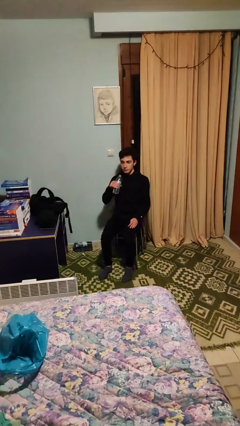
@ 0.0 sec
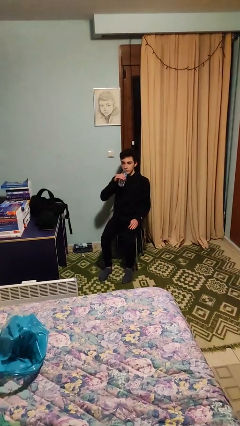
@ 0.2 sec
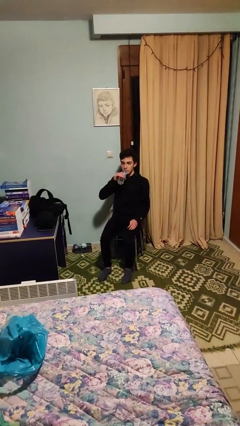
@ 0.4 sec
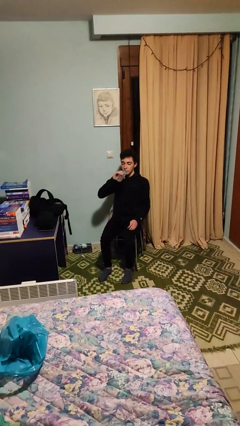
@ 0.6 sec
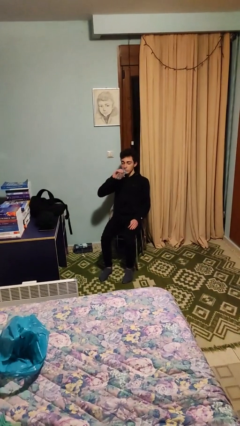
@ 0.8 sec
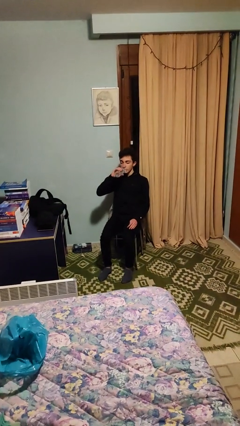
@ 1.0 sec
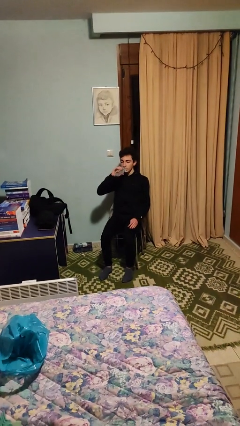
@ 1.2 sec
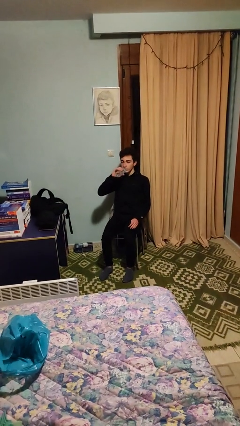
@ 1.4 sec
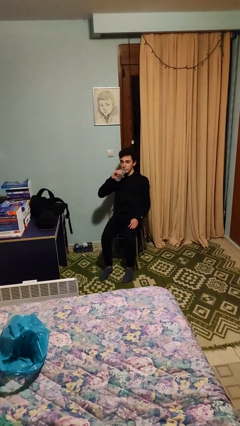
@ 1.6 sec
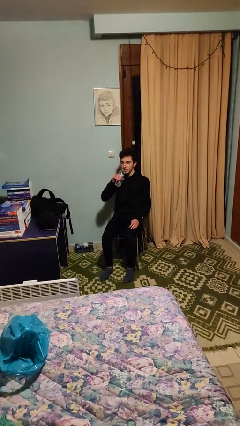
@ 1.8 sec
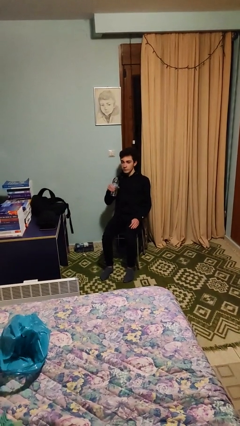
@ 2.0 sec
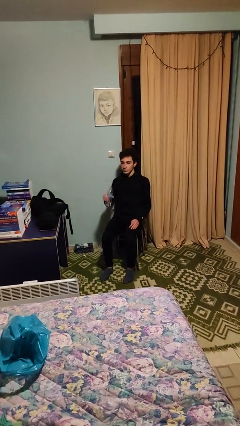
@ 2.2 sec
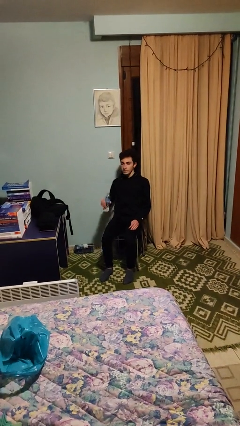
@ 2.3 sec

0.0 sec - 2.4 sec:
person drinks from bottle

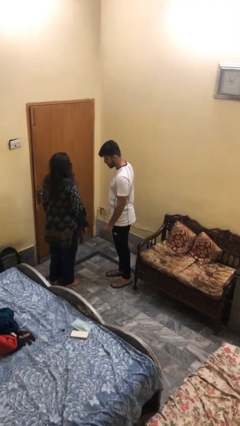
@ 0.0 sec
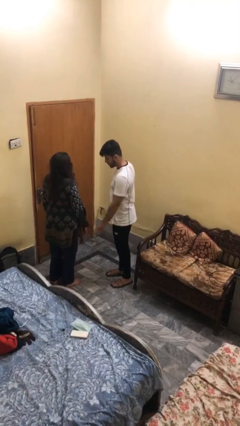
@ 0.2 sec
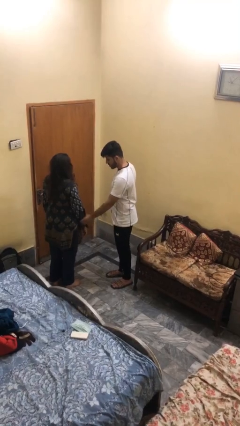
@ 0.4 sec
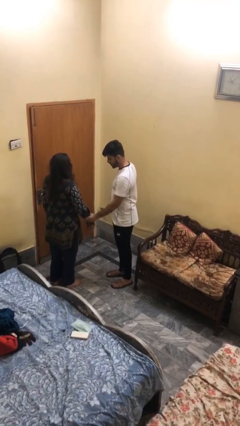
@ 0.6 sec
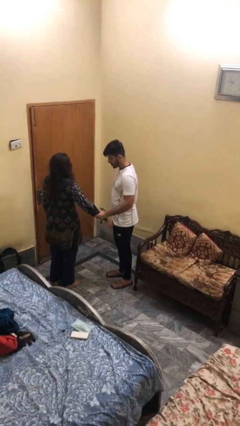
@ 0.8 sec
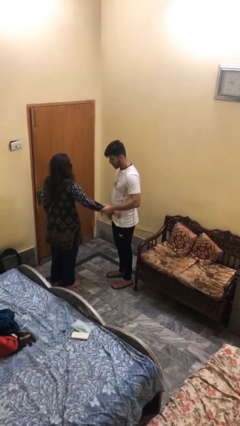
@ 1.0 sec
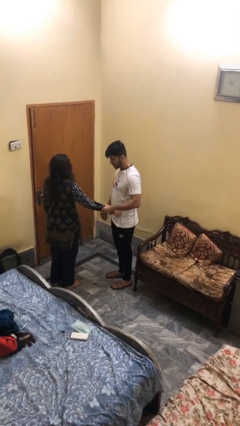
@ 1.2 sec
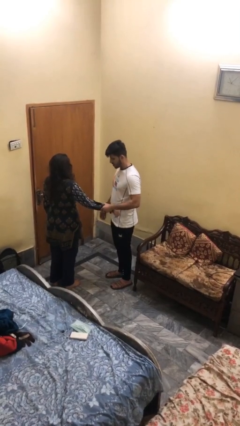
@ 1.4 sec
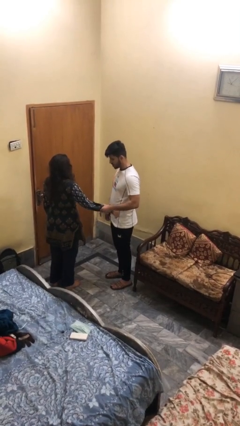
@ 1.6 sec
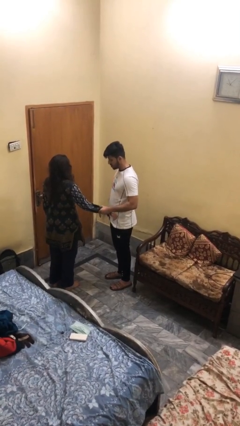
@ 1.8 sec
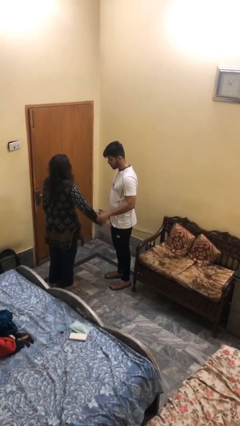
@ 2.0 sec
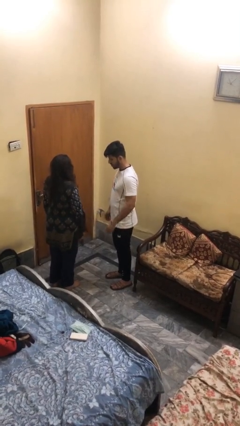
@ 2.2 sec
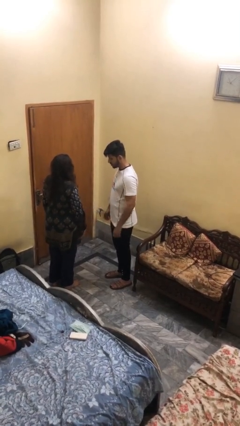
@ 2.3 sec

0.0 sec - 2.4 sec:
person grabs person by forearm

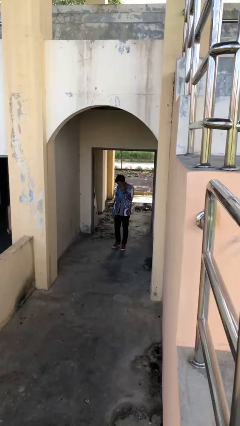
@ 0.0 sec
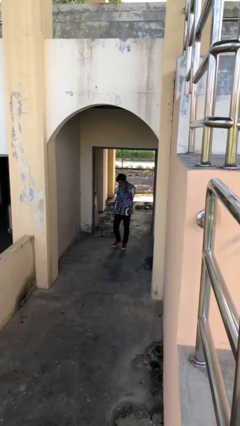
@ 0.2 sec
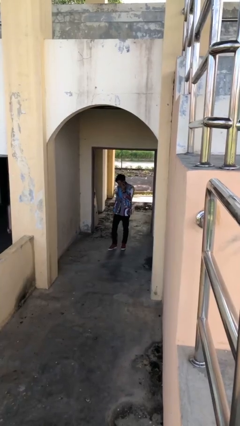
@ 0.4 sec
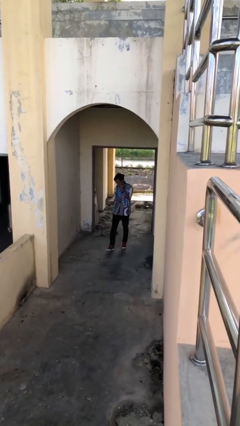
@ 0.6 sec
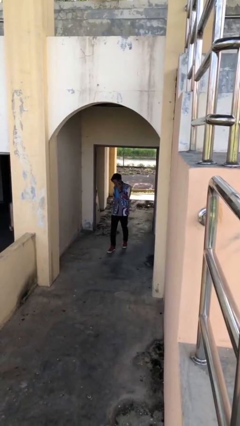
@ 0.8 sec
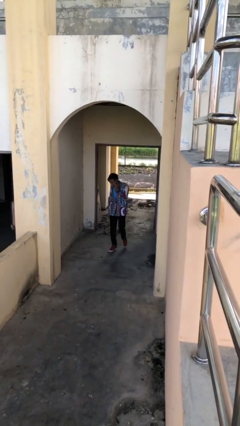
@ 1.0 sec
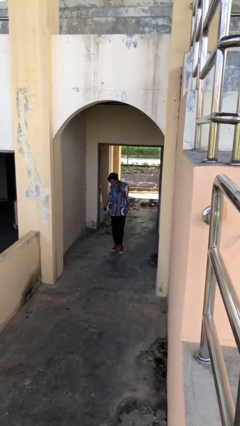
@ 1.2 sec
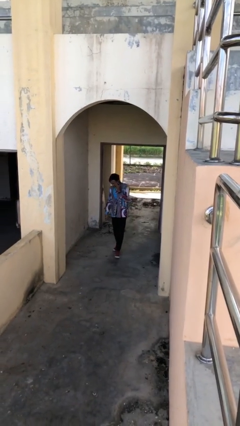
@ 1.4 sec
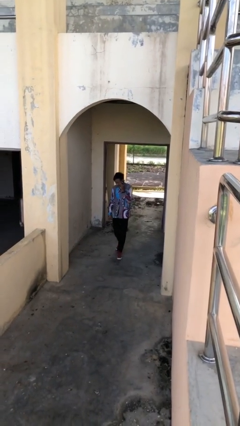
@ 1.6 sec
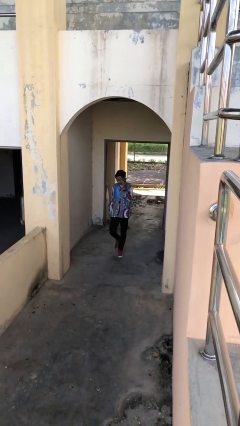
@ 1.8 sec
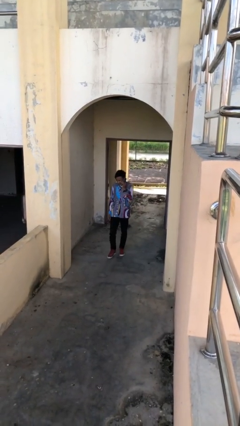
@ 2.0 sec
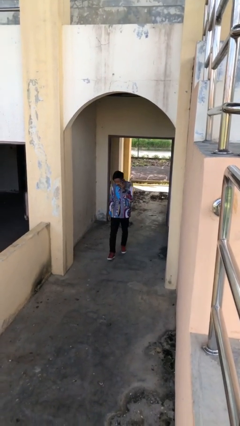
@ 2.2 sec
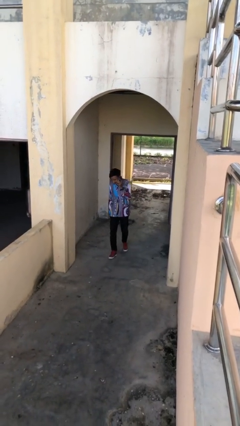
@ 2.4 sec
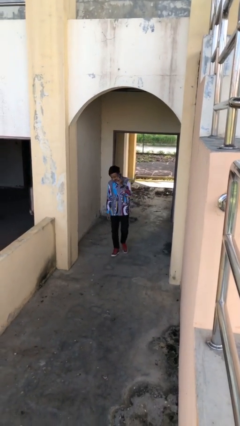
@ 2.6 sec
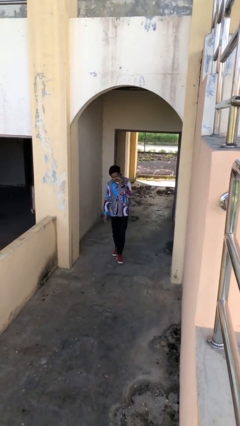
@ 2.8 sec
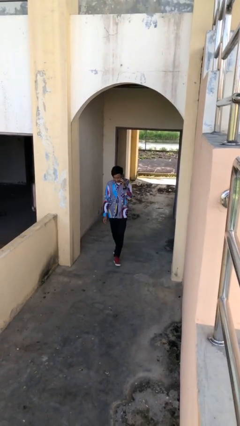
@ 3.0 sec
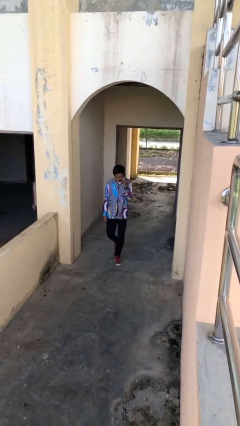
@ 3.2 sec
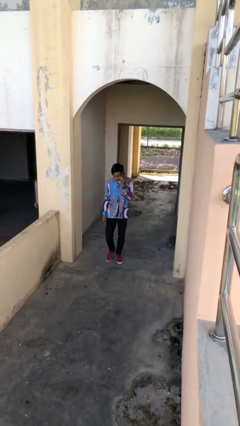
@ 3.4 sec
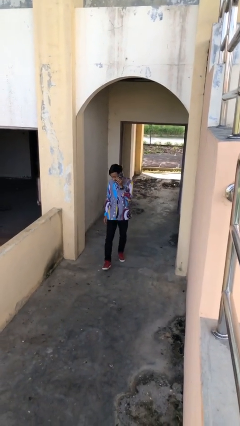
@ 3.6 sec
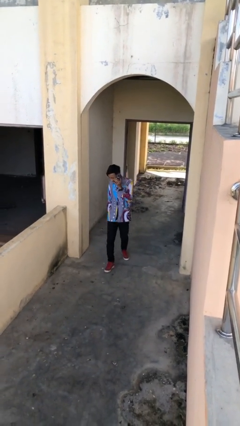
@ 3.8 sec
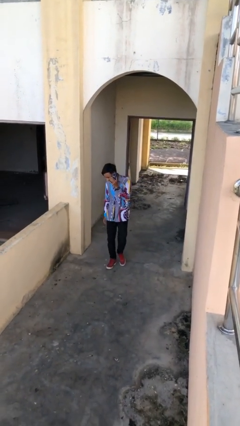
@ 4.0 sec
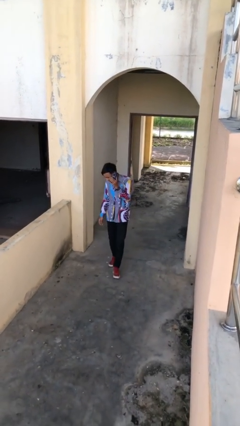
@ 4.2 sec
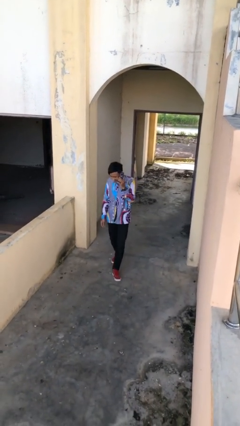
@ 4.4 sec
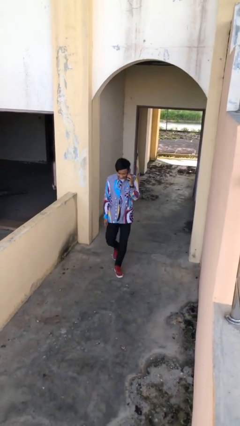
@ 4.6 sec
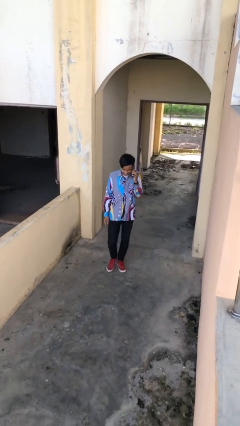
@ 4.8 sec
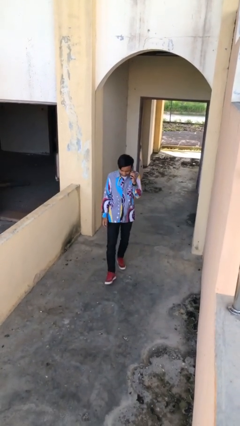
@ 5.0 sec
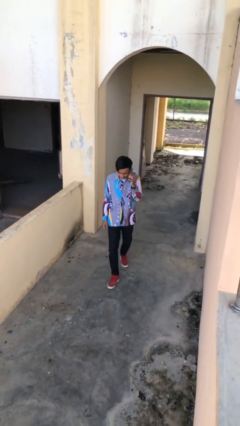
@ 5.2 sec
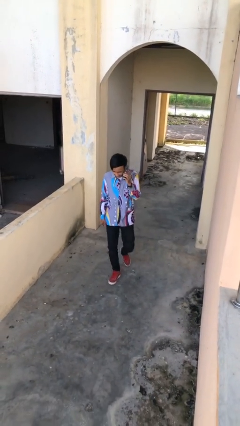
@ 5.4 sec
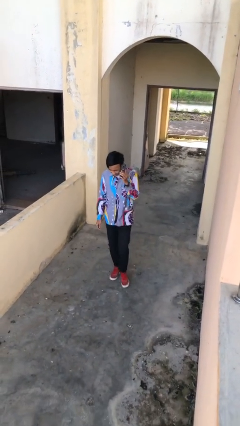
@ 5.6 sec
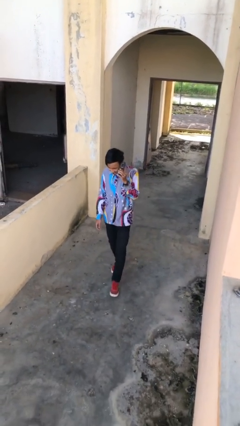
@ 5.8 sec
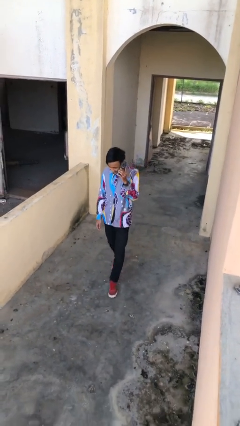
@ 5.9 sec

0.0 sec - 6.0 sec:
person enters scene through structure

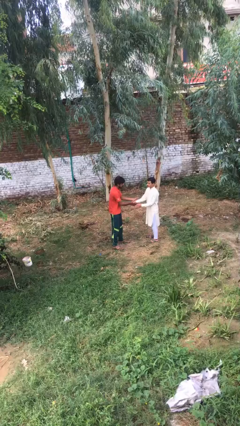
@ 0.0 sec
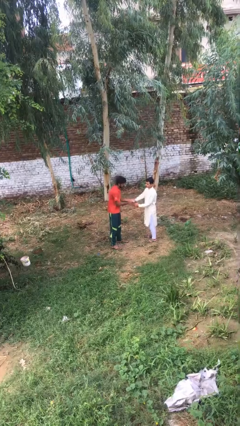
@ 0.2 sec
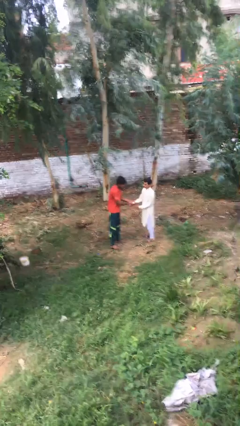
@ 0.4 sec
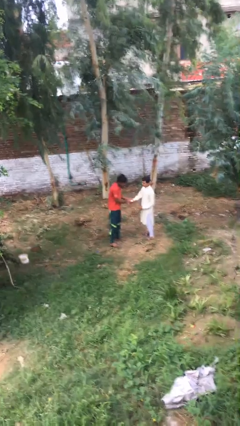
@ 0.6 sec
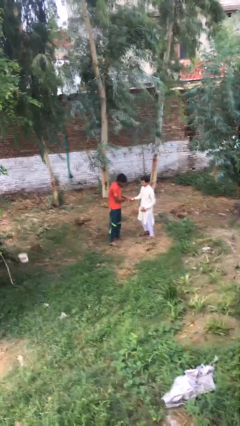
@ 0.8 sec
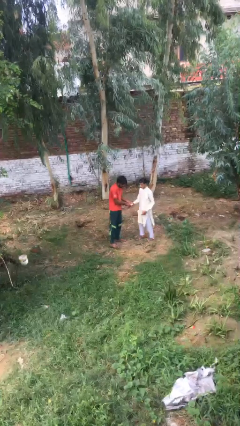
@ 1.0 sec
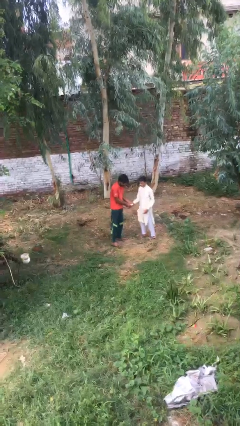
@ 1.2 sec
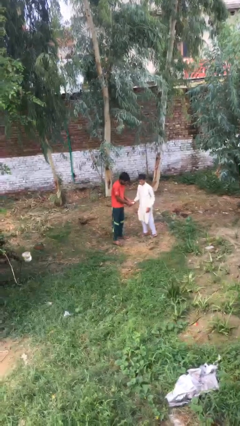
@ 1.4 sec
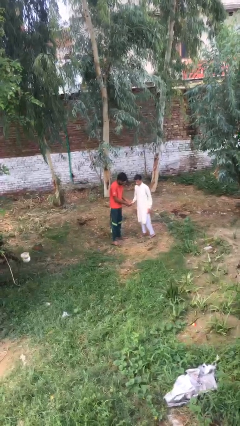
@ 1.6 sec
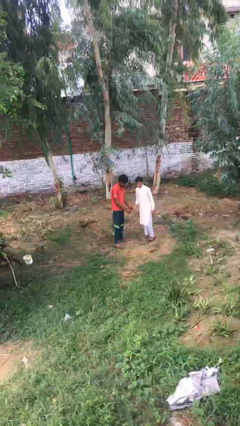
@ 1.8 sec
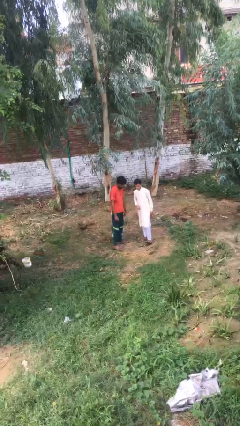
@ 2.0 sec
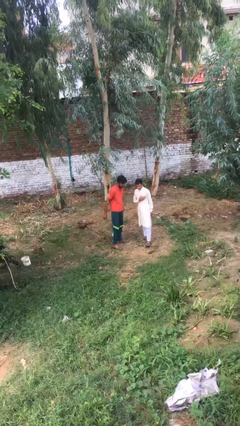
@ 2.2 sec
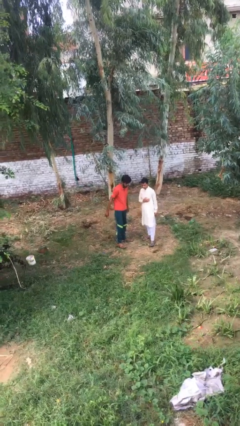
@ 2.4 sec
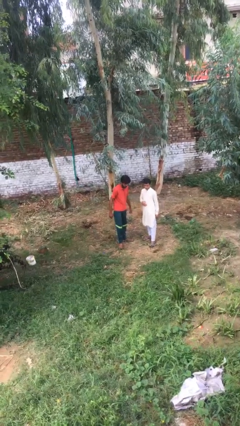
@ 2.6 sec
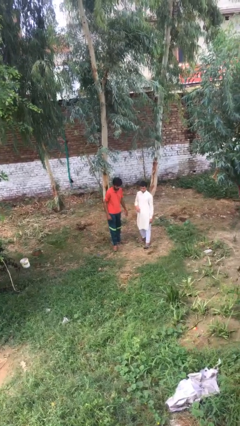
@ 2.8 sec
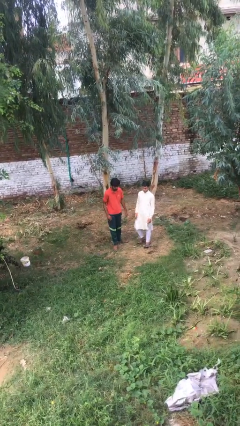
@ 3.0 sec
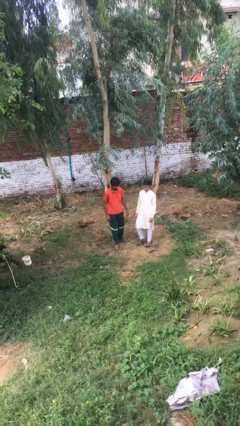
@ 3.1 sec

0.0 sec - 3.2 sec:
person shakes hand

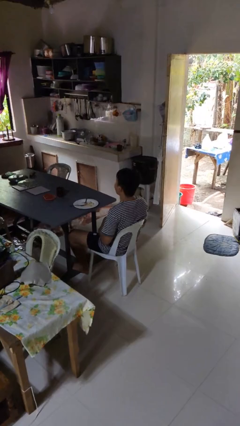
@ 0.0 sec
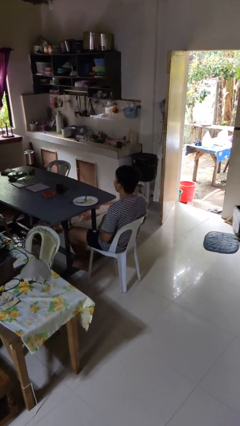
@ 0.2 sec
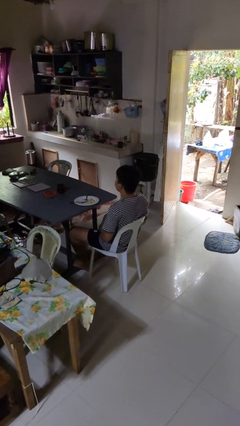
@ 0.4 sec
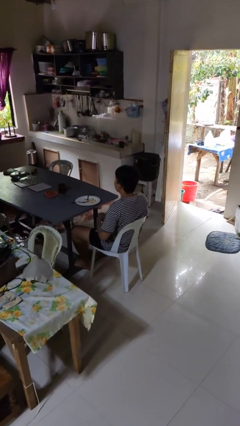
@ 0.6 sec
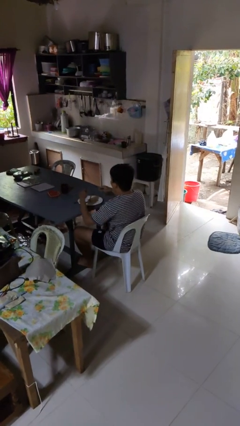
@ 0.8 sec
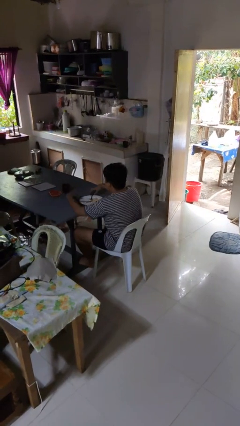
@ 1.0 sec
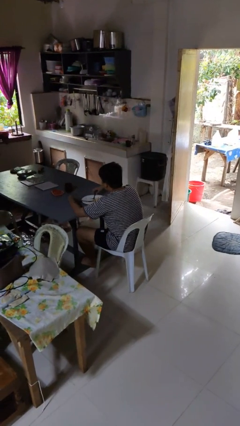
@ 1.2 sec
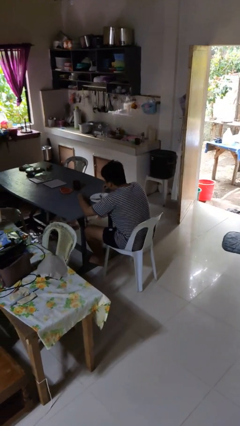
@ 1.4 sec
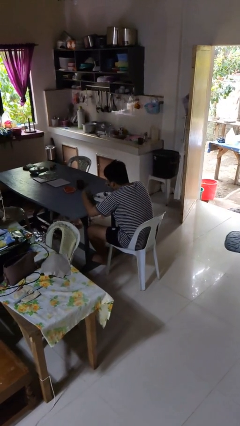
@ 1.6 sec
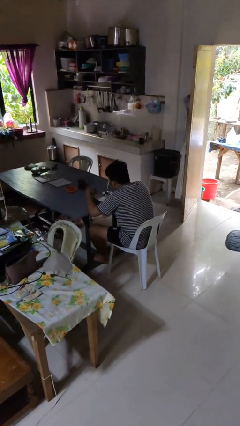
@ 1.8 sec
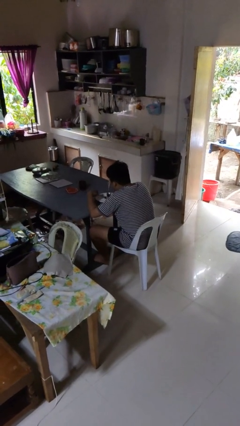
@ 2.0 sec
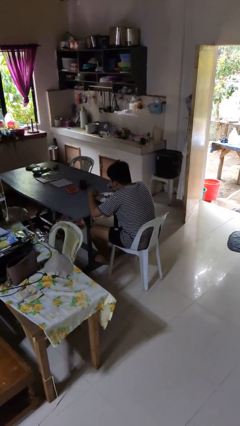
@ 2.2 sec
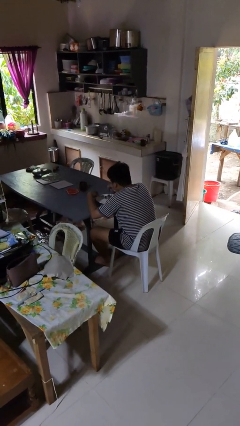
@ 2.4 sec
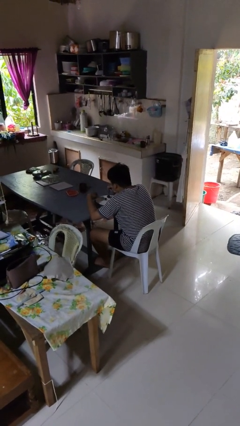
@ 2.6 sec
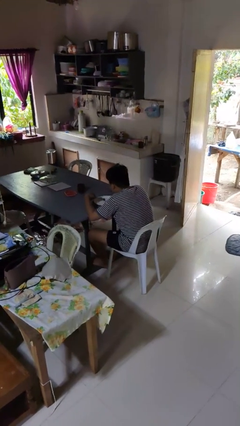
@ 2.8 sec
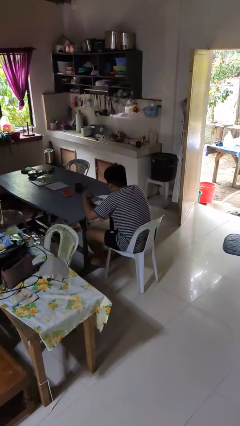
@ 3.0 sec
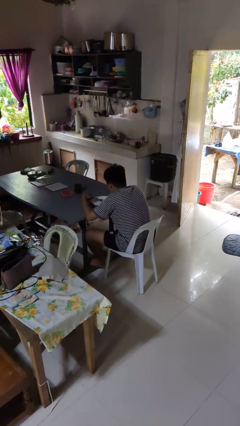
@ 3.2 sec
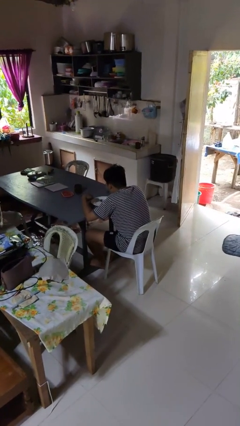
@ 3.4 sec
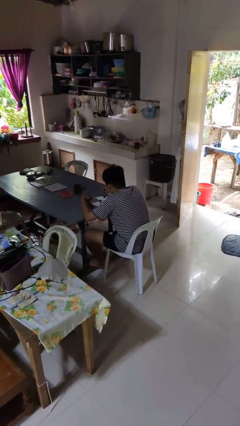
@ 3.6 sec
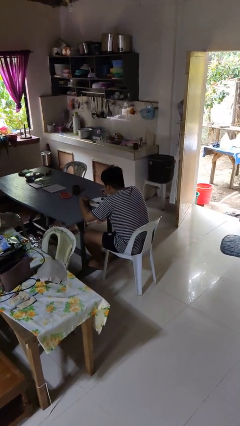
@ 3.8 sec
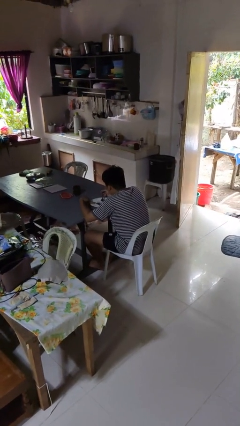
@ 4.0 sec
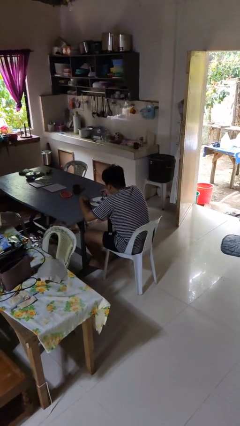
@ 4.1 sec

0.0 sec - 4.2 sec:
person eats with utensil
